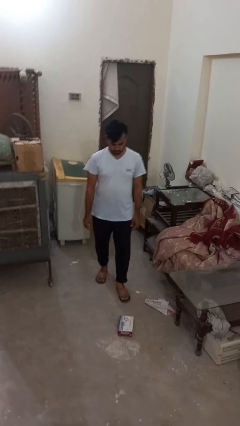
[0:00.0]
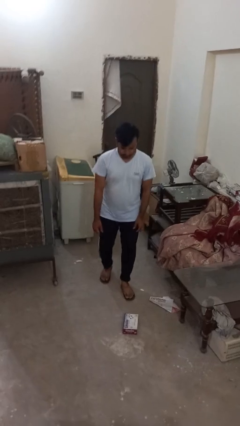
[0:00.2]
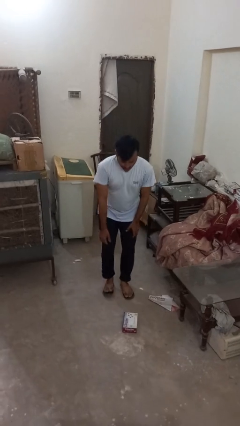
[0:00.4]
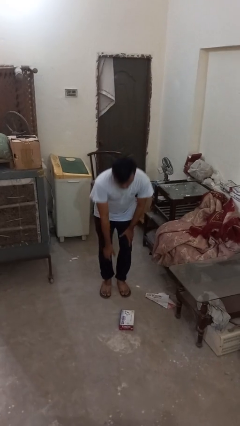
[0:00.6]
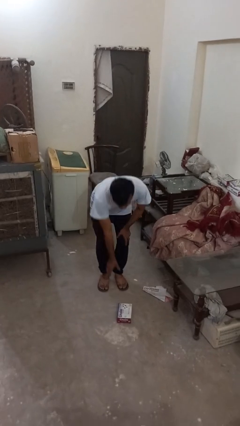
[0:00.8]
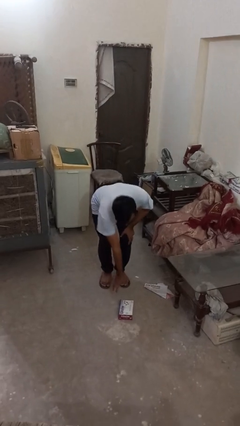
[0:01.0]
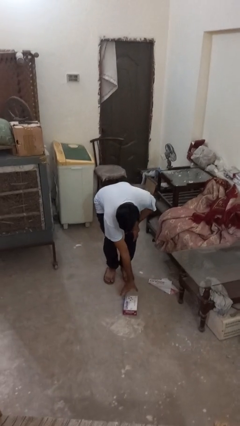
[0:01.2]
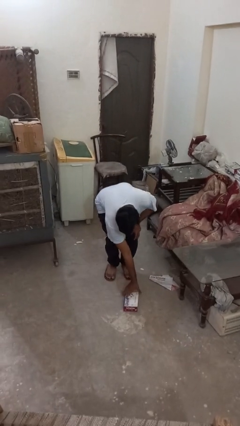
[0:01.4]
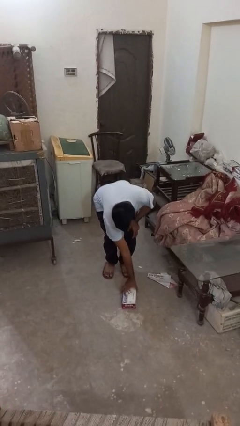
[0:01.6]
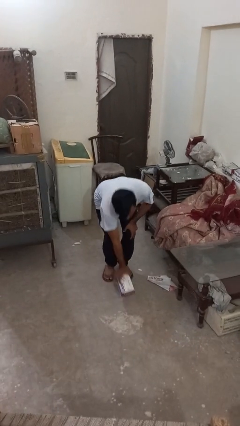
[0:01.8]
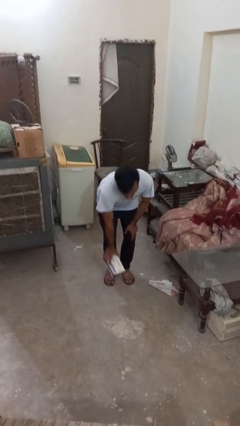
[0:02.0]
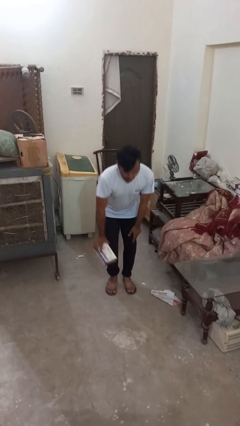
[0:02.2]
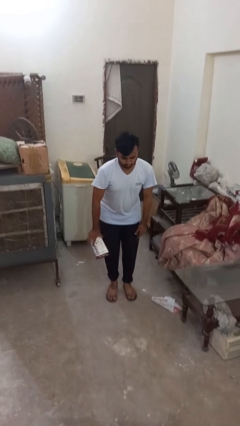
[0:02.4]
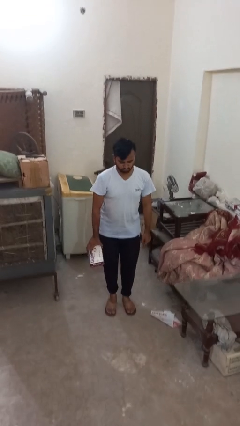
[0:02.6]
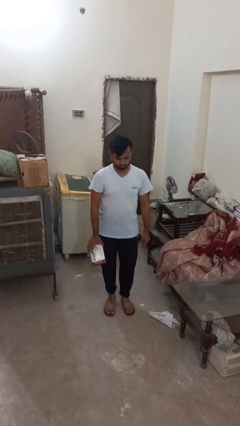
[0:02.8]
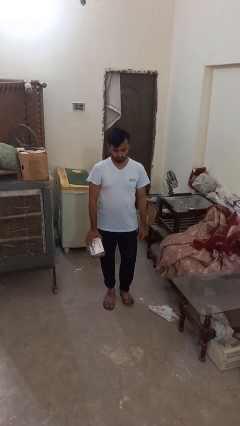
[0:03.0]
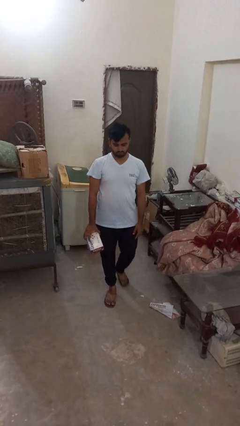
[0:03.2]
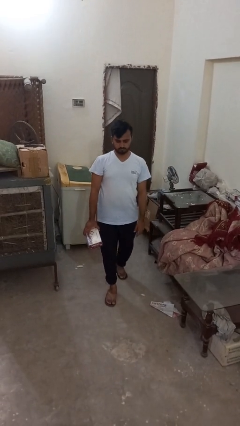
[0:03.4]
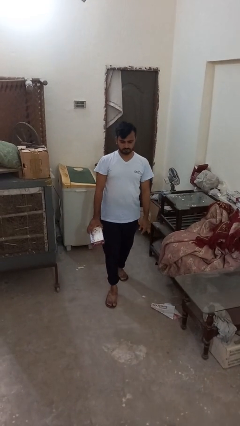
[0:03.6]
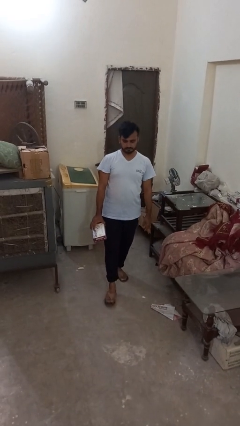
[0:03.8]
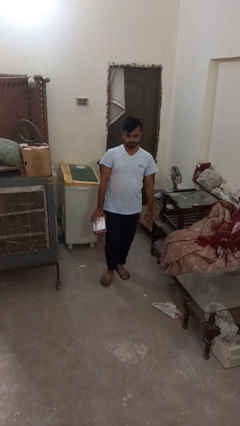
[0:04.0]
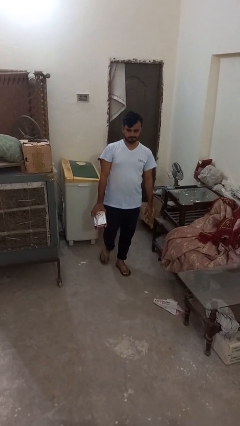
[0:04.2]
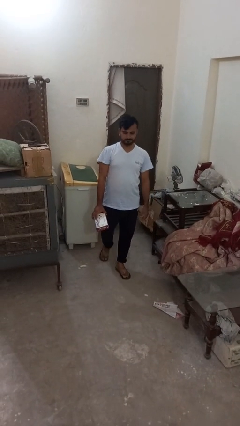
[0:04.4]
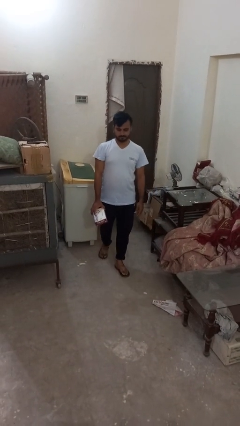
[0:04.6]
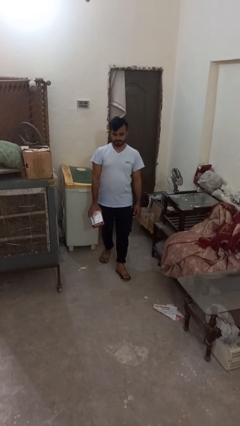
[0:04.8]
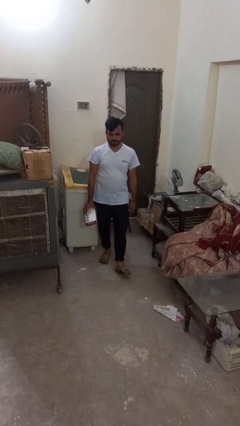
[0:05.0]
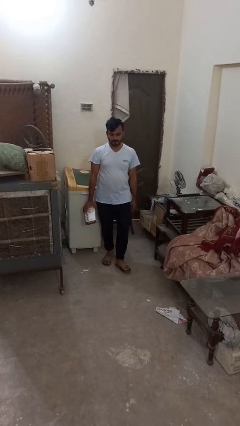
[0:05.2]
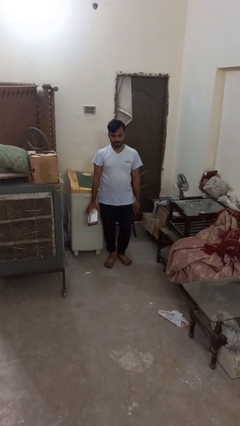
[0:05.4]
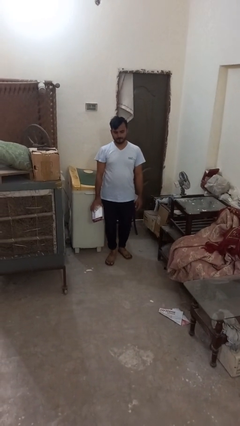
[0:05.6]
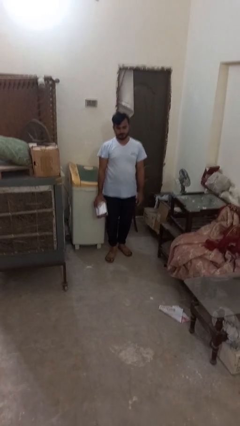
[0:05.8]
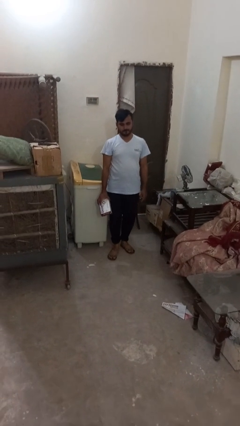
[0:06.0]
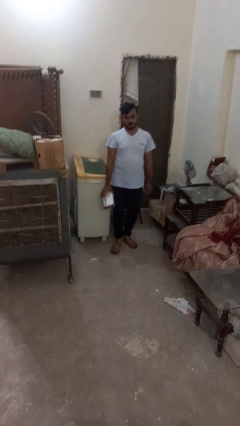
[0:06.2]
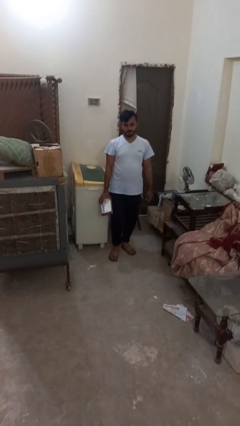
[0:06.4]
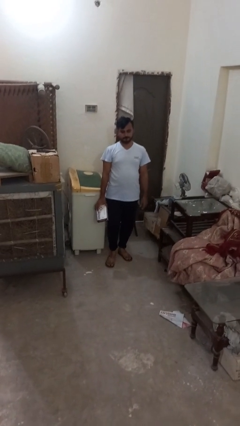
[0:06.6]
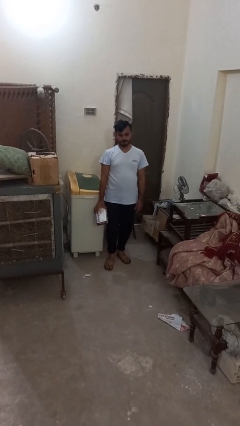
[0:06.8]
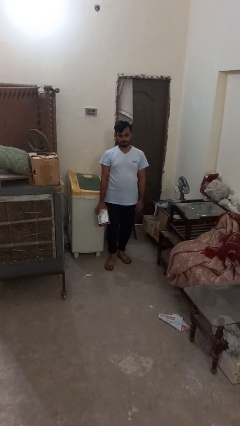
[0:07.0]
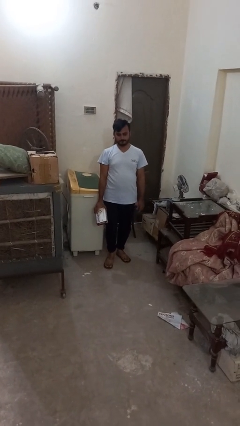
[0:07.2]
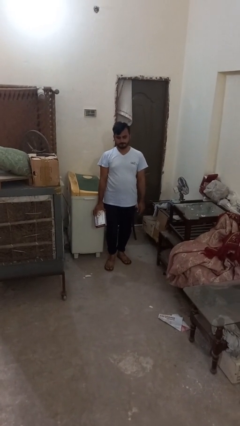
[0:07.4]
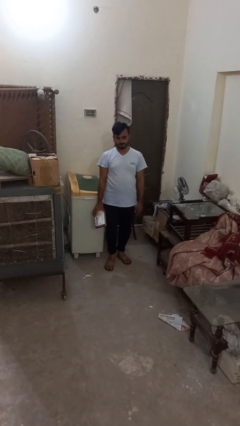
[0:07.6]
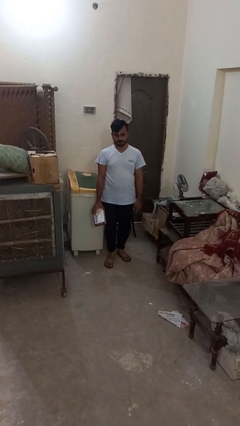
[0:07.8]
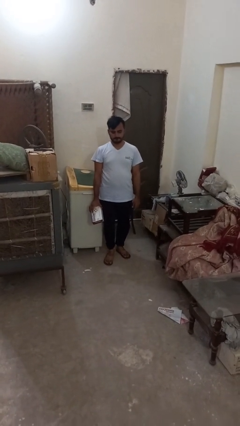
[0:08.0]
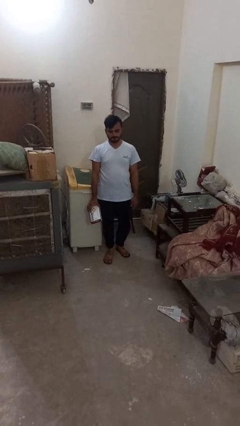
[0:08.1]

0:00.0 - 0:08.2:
person picks up object from floor

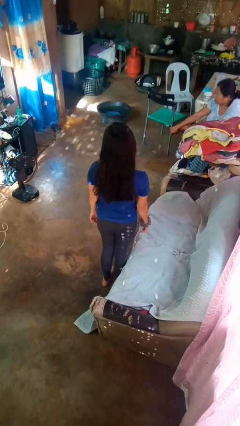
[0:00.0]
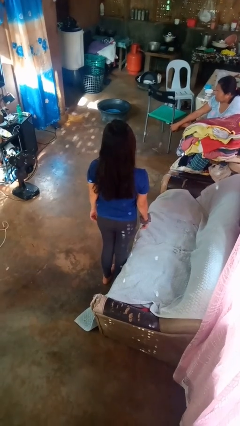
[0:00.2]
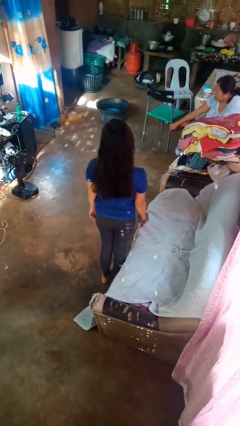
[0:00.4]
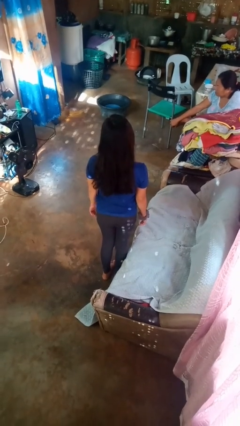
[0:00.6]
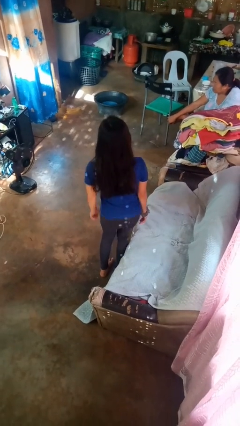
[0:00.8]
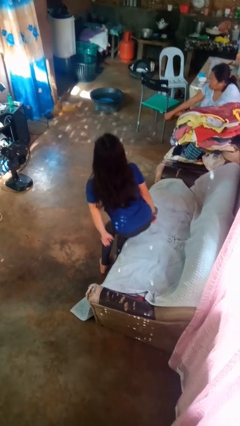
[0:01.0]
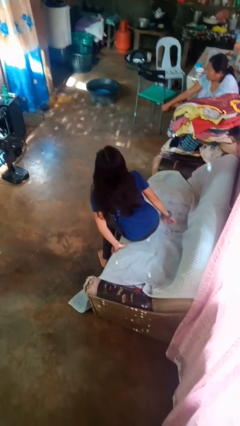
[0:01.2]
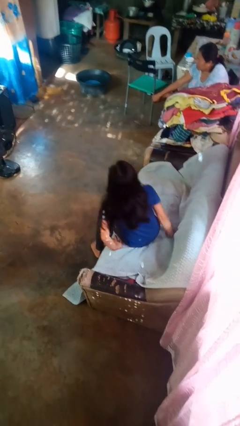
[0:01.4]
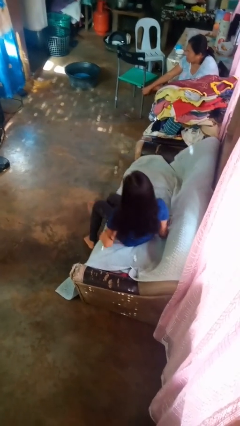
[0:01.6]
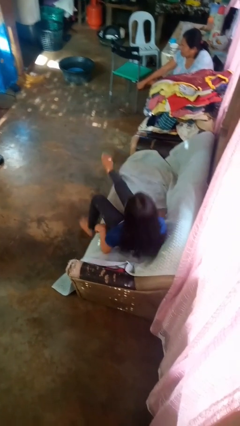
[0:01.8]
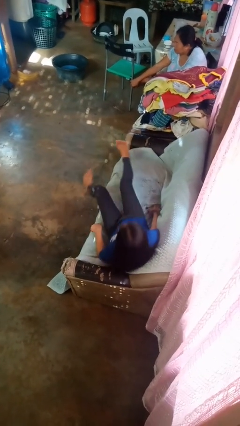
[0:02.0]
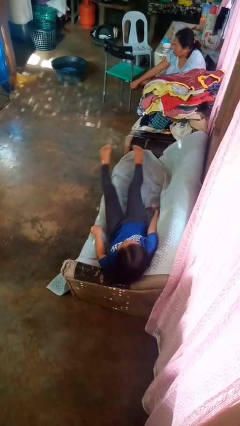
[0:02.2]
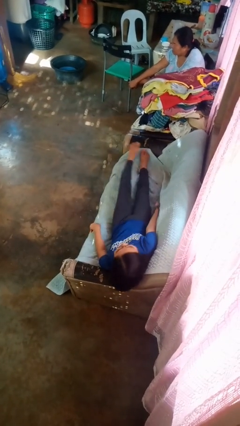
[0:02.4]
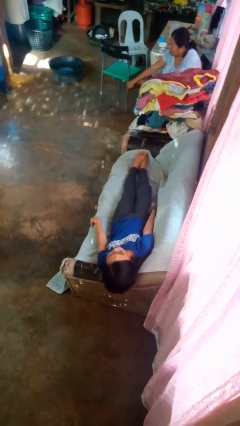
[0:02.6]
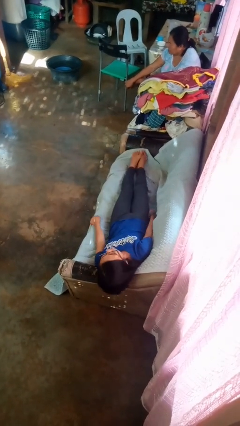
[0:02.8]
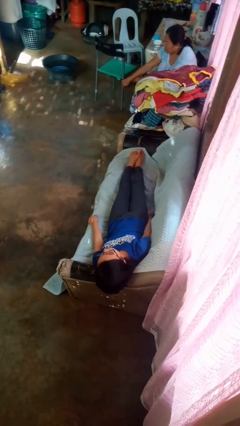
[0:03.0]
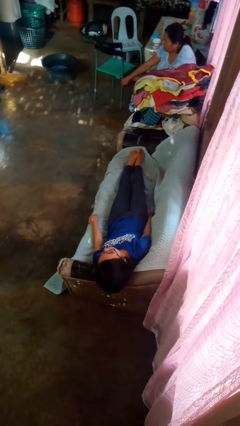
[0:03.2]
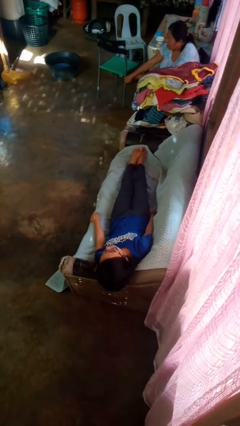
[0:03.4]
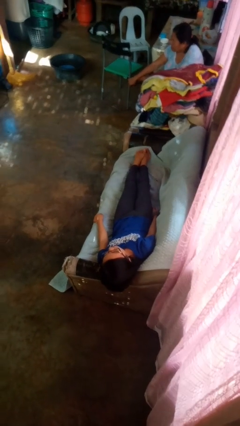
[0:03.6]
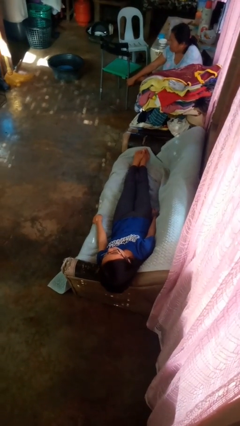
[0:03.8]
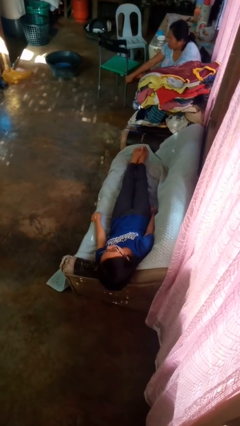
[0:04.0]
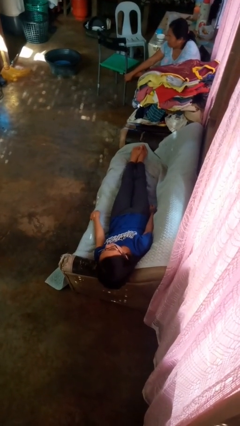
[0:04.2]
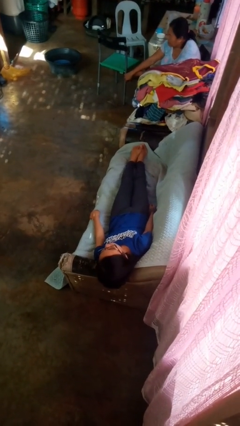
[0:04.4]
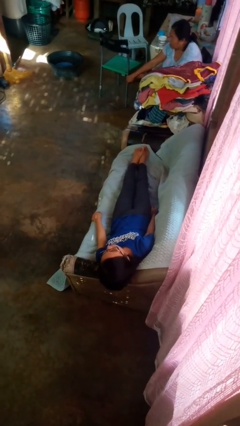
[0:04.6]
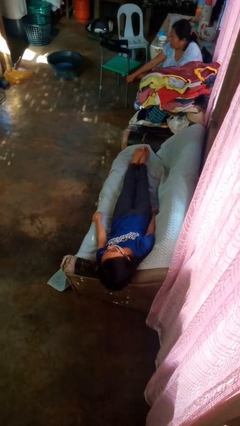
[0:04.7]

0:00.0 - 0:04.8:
person lies down on couch

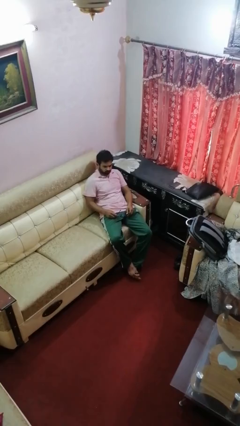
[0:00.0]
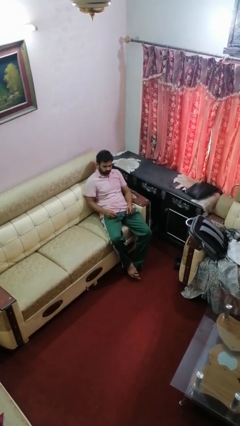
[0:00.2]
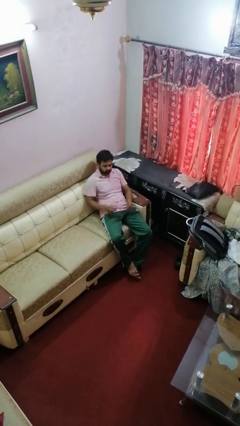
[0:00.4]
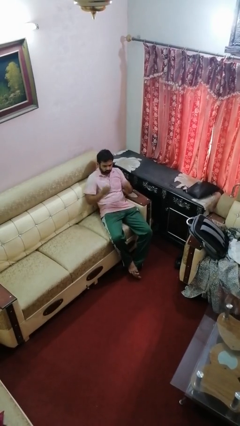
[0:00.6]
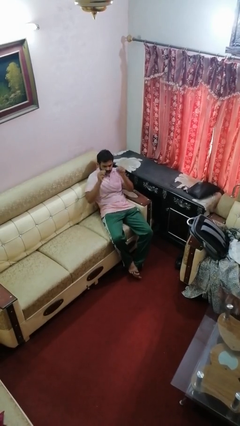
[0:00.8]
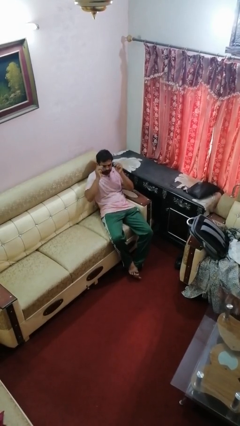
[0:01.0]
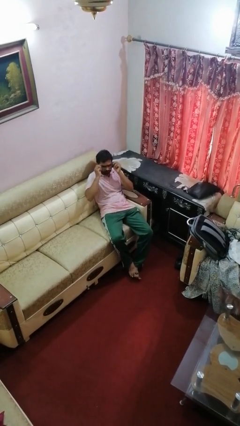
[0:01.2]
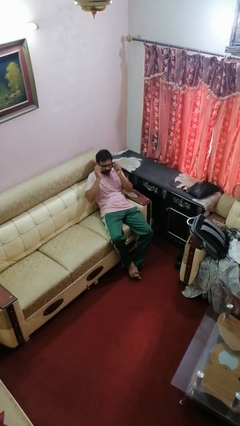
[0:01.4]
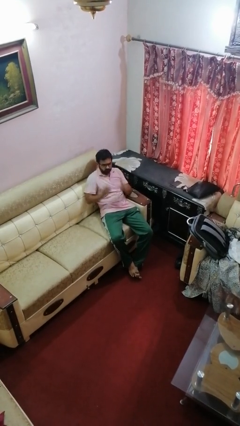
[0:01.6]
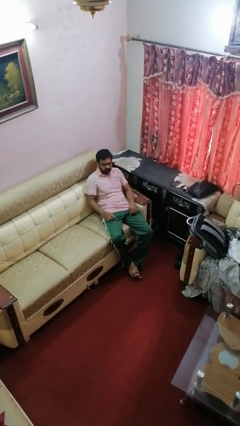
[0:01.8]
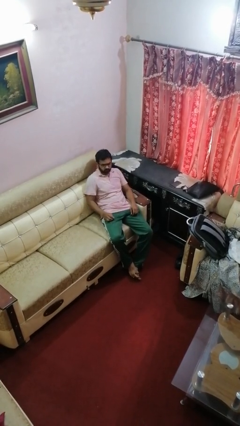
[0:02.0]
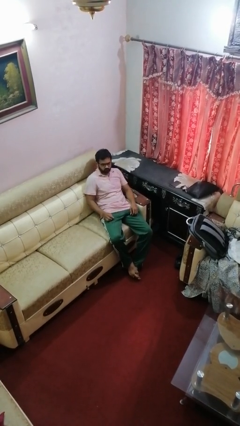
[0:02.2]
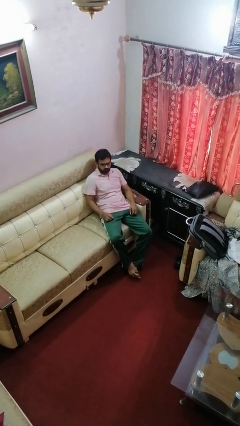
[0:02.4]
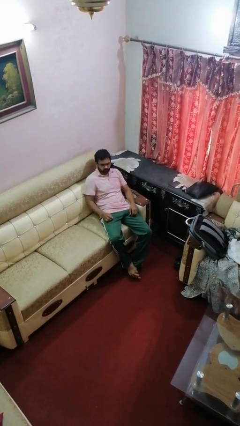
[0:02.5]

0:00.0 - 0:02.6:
person puts on glasses

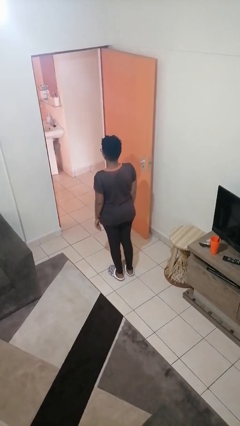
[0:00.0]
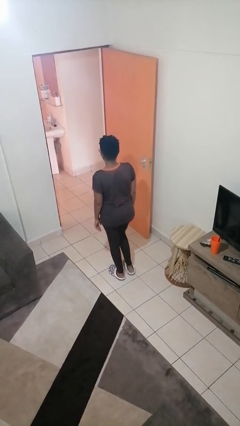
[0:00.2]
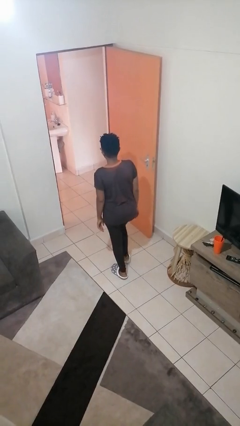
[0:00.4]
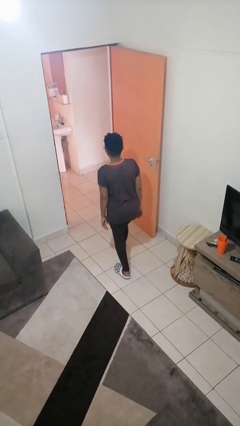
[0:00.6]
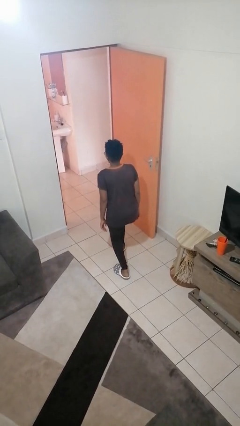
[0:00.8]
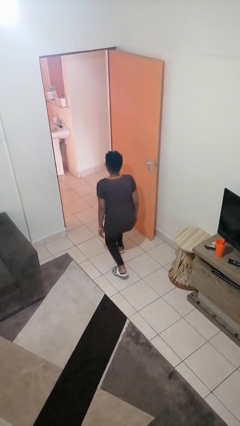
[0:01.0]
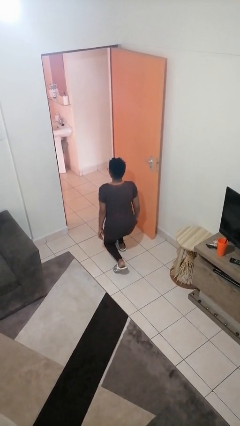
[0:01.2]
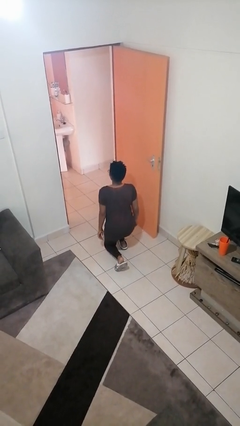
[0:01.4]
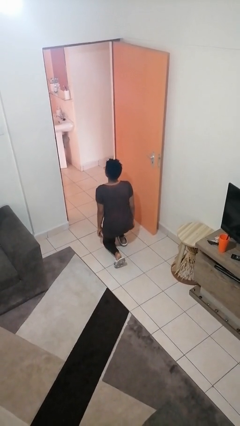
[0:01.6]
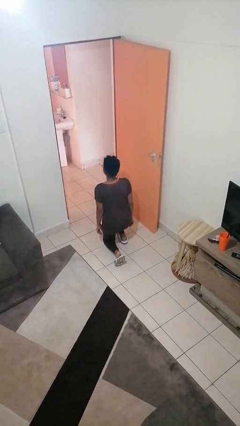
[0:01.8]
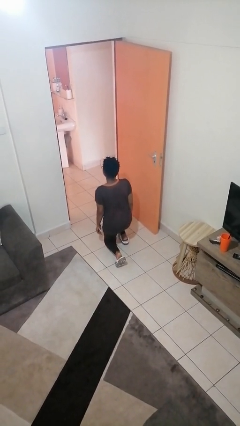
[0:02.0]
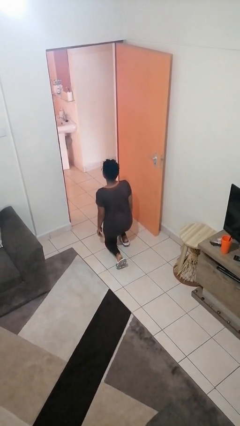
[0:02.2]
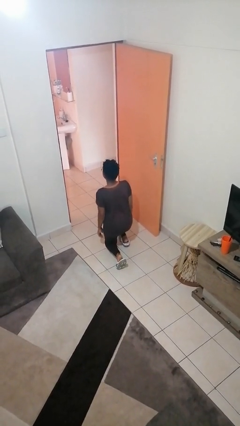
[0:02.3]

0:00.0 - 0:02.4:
person kneels

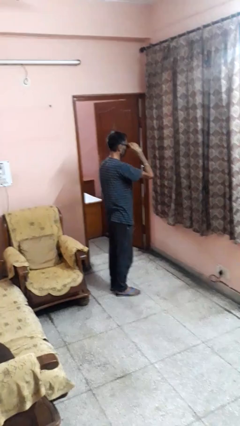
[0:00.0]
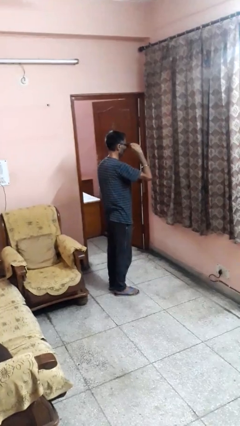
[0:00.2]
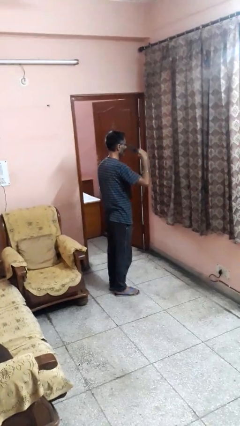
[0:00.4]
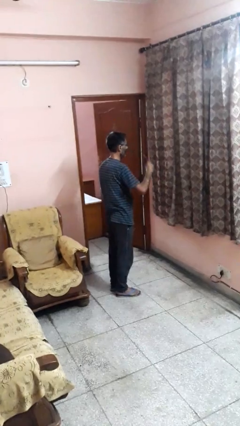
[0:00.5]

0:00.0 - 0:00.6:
person takes off sunglasses
